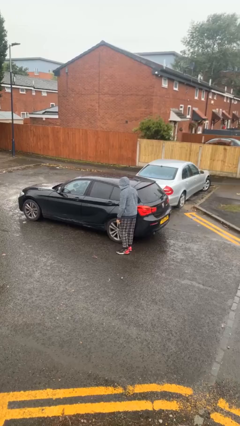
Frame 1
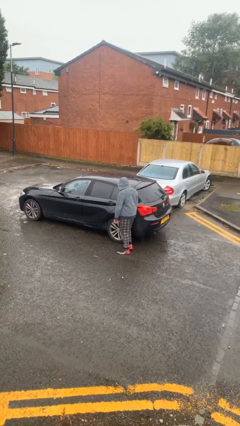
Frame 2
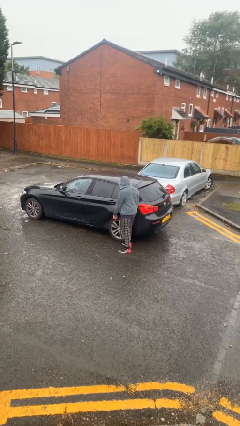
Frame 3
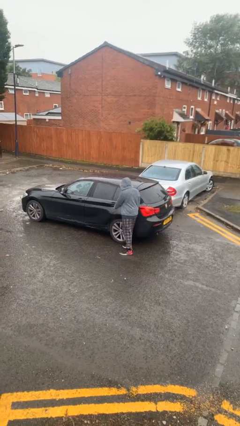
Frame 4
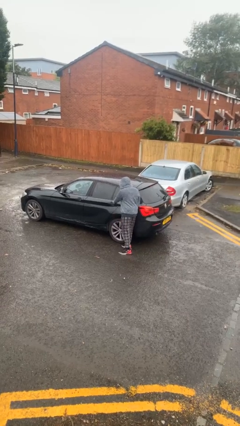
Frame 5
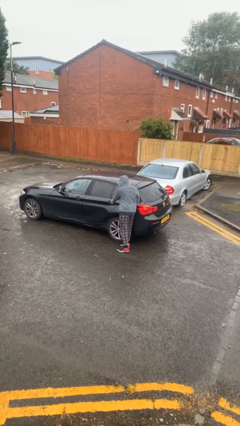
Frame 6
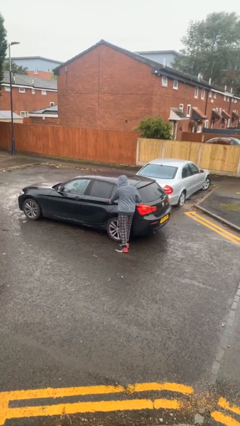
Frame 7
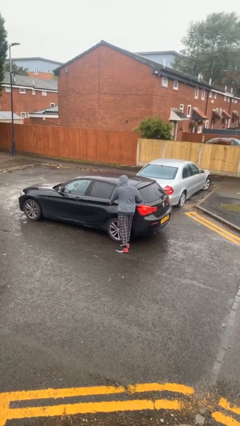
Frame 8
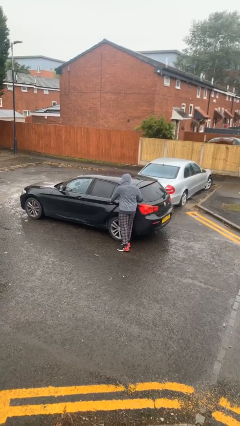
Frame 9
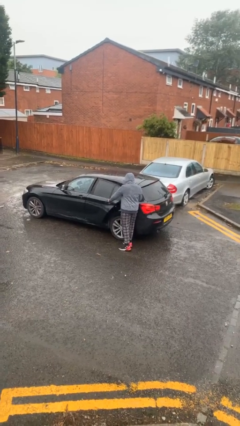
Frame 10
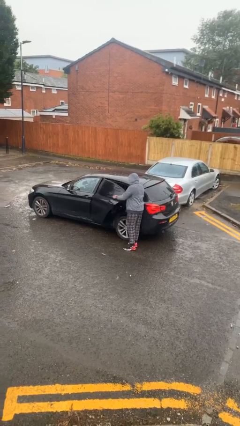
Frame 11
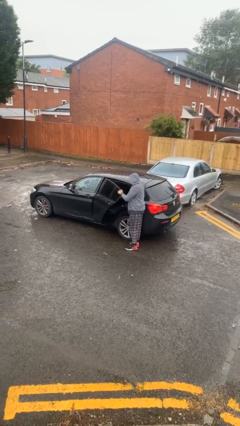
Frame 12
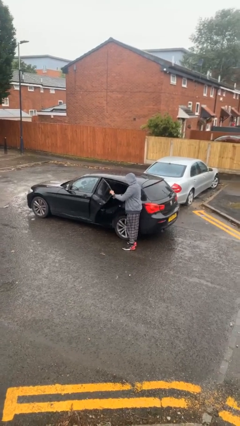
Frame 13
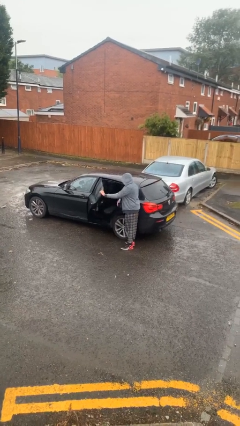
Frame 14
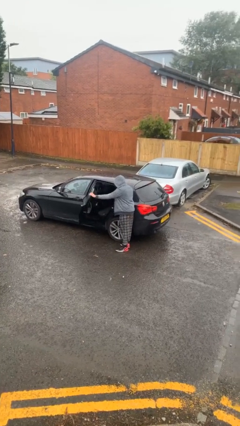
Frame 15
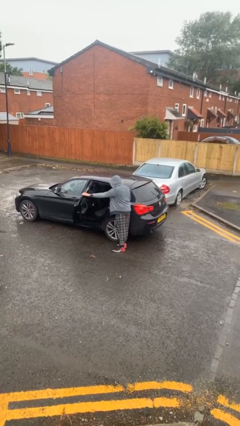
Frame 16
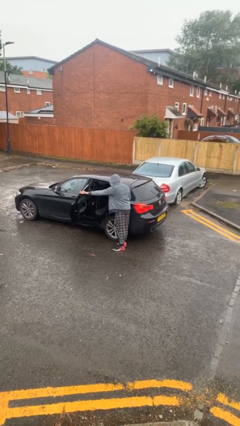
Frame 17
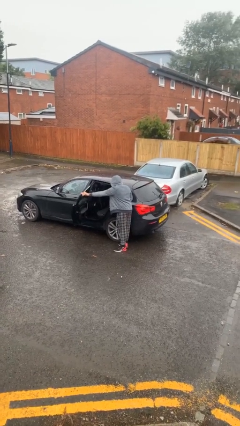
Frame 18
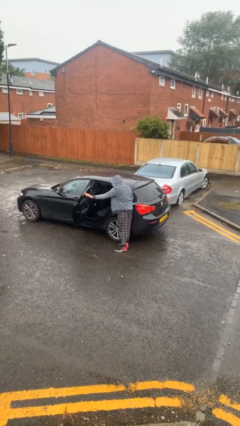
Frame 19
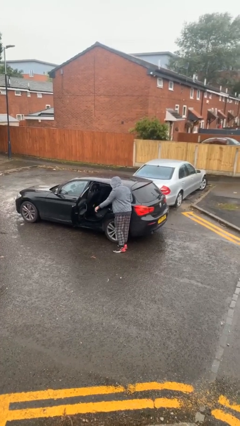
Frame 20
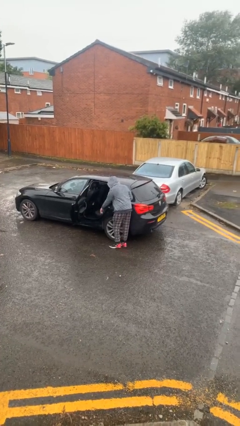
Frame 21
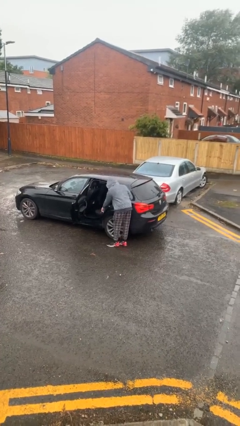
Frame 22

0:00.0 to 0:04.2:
person opens car door

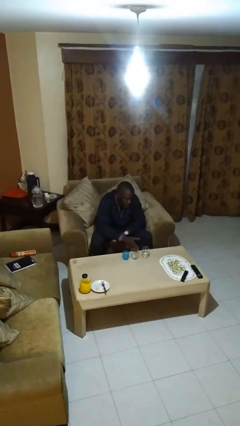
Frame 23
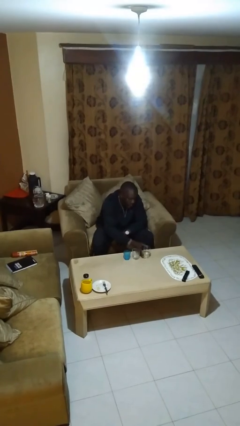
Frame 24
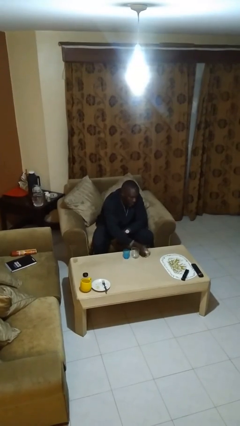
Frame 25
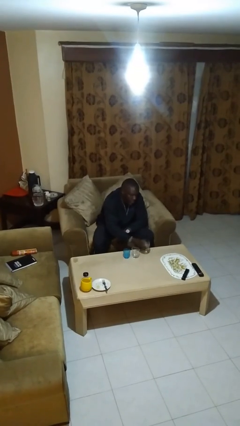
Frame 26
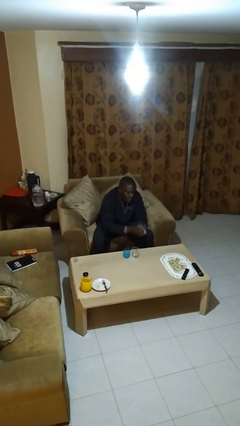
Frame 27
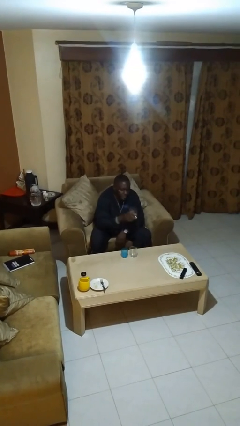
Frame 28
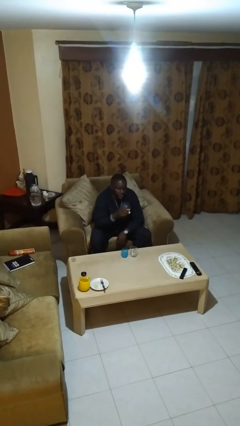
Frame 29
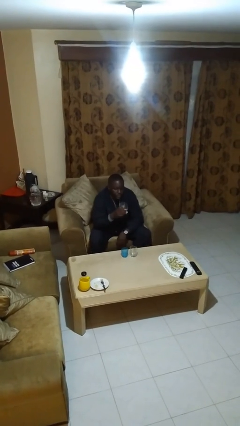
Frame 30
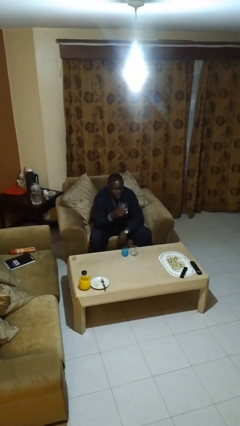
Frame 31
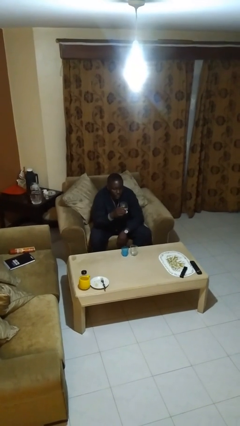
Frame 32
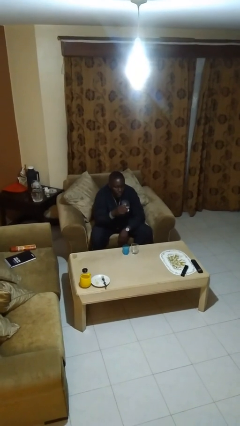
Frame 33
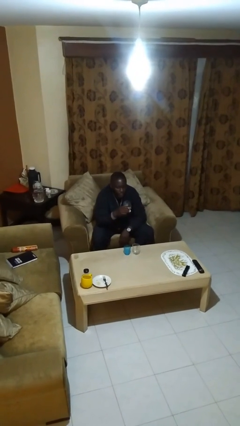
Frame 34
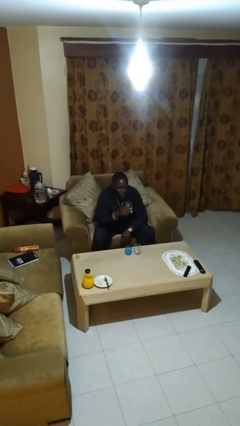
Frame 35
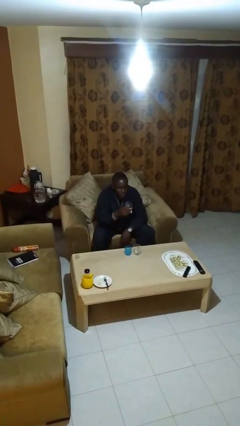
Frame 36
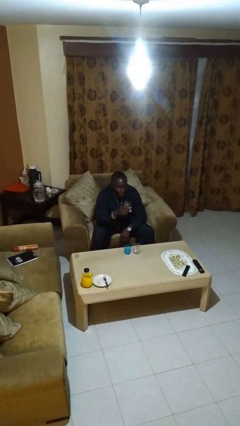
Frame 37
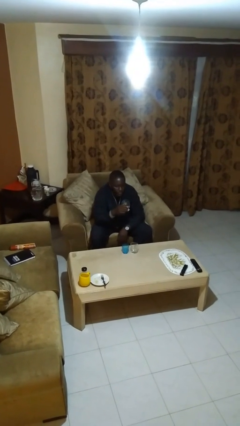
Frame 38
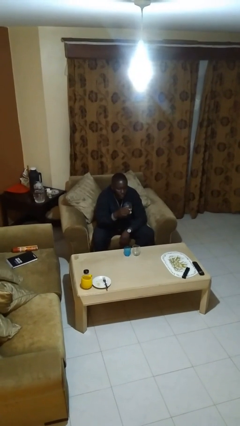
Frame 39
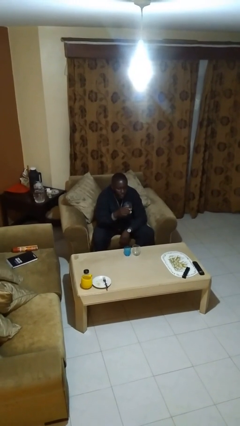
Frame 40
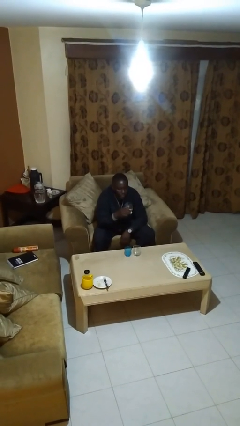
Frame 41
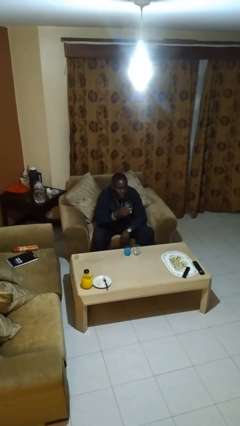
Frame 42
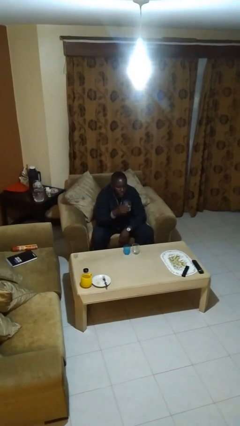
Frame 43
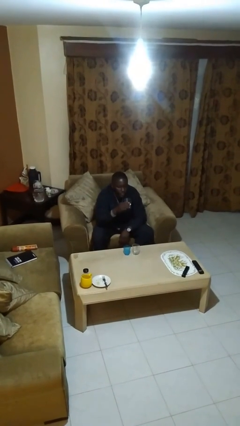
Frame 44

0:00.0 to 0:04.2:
person picks up object from table

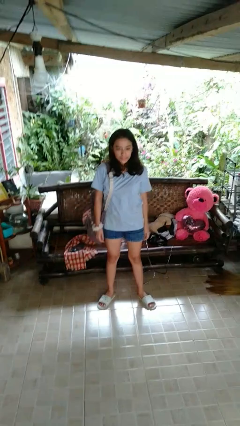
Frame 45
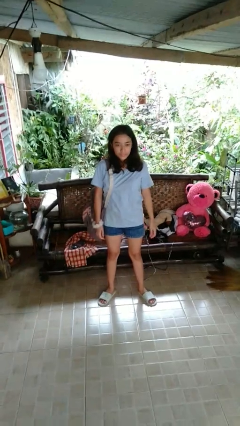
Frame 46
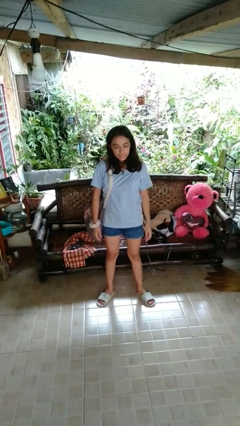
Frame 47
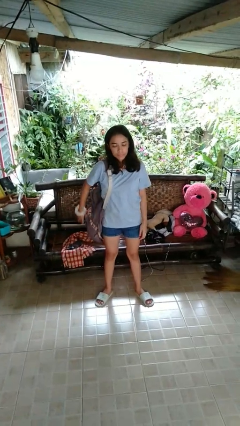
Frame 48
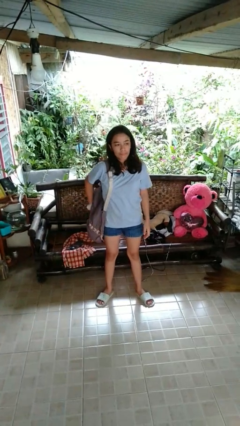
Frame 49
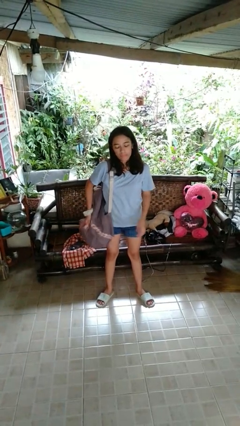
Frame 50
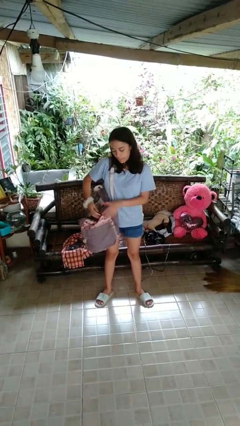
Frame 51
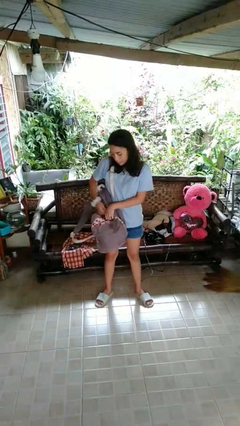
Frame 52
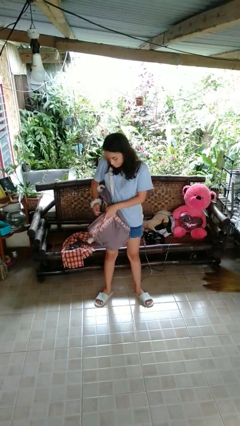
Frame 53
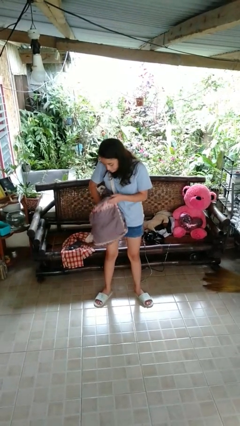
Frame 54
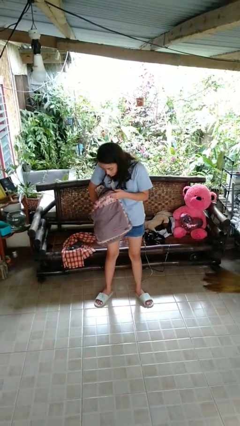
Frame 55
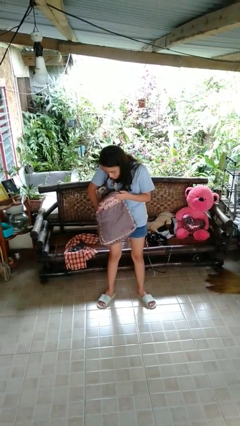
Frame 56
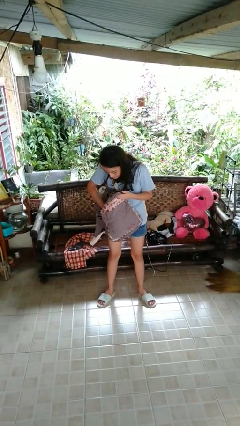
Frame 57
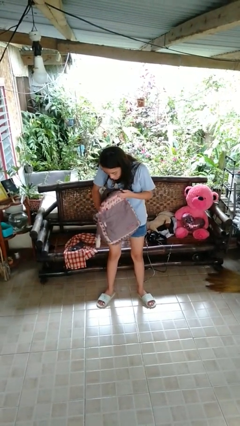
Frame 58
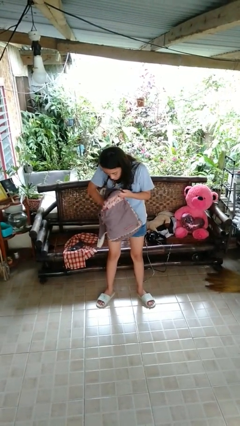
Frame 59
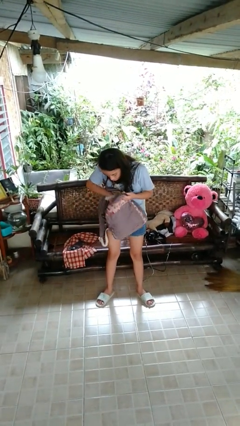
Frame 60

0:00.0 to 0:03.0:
person searches in backpack

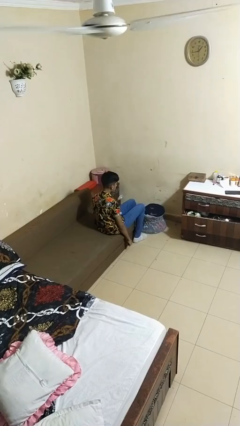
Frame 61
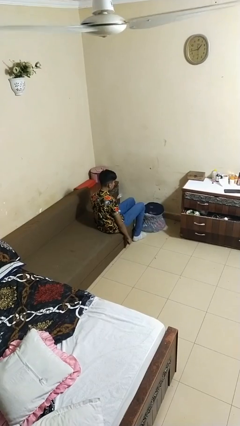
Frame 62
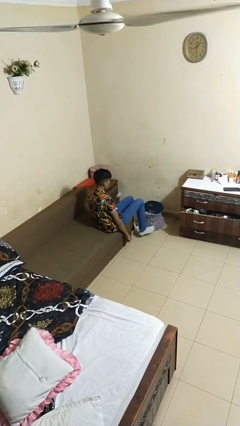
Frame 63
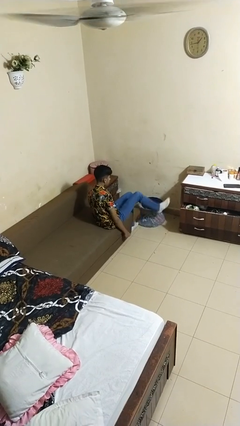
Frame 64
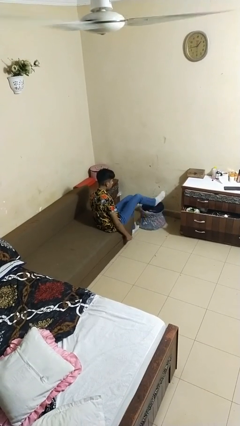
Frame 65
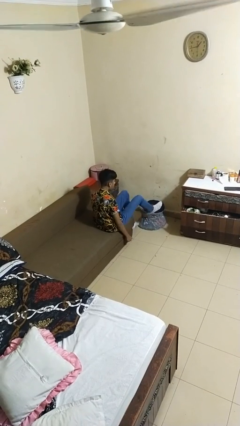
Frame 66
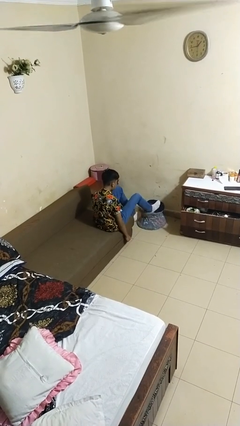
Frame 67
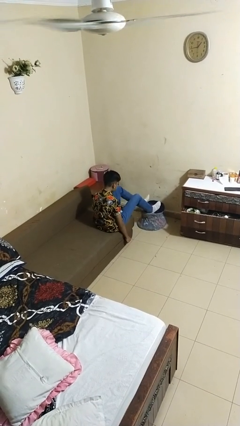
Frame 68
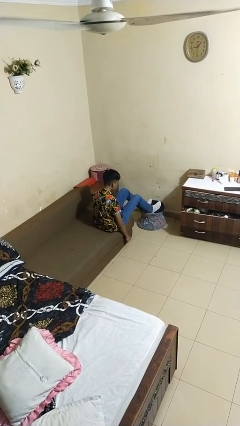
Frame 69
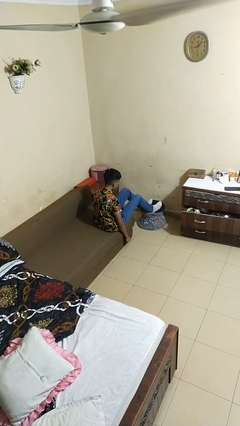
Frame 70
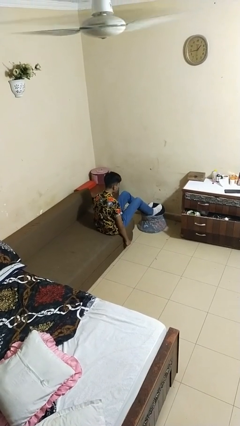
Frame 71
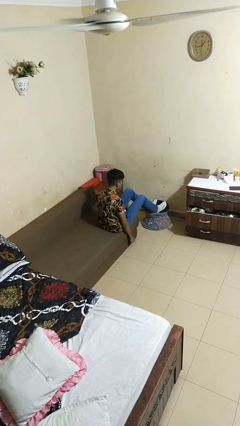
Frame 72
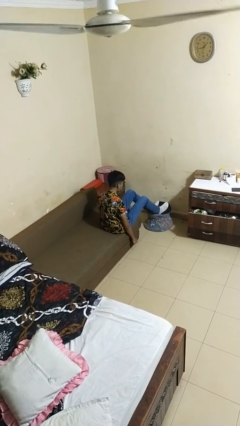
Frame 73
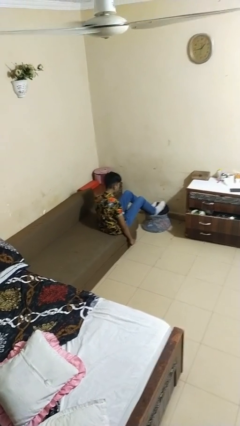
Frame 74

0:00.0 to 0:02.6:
person puts feet up

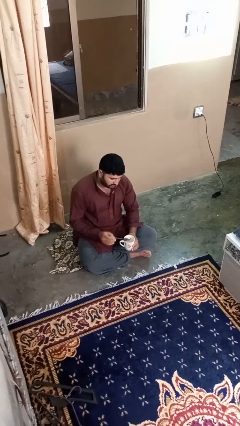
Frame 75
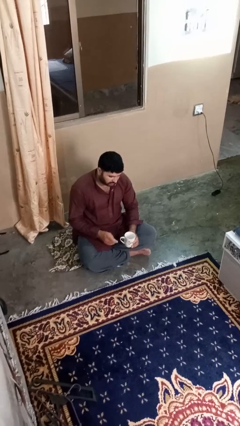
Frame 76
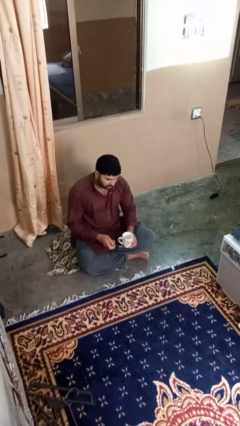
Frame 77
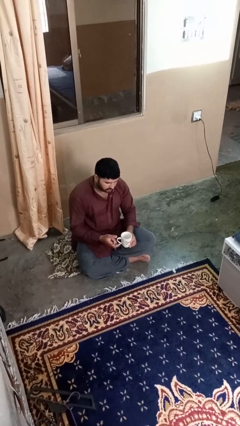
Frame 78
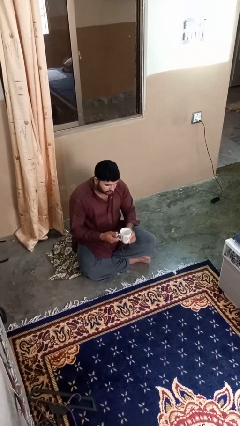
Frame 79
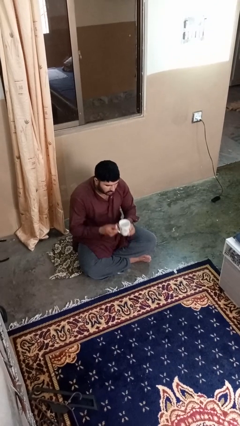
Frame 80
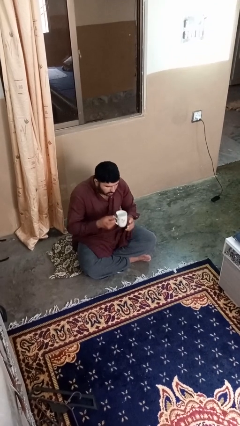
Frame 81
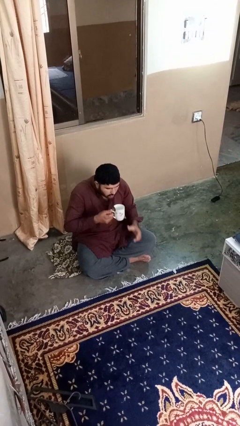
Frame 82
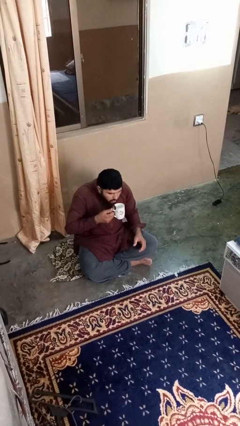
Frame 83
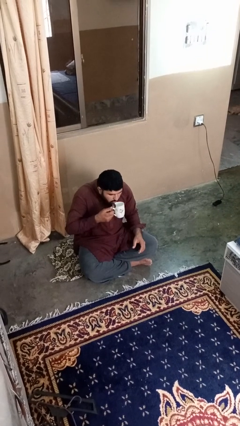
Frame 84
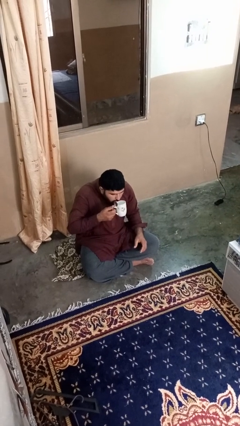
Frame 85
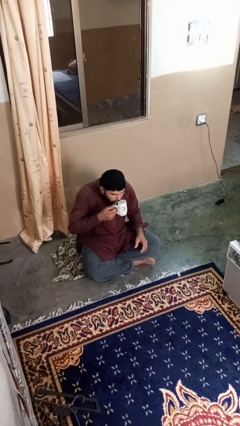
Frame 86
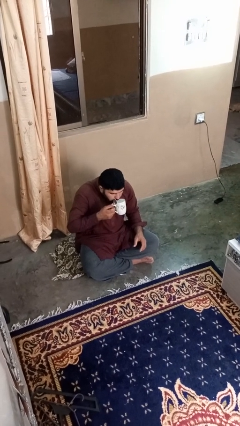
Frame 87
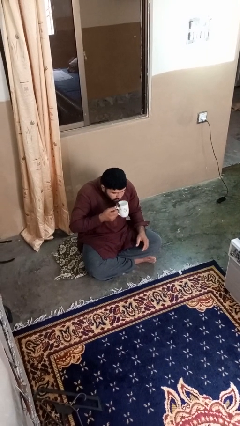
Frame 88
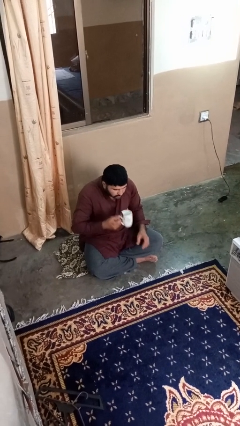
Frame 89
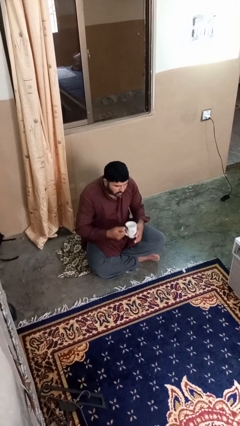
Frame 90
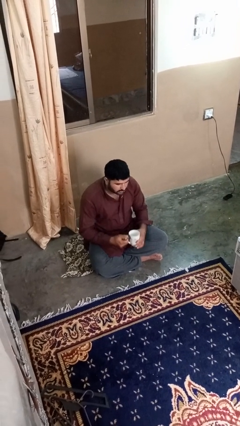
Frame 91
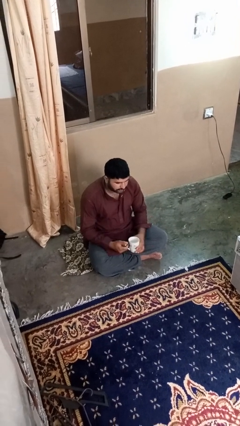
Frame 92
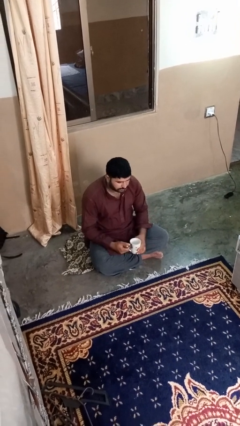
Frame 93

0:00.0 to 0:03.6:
person drinks from mug
